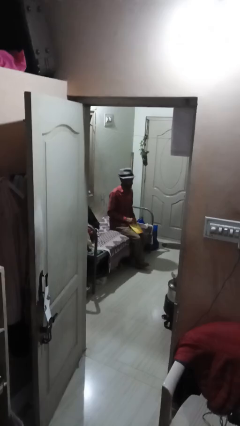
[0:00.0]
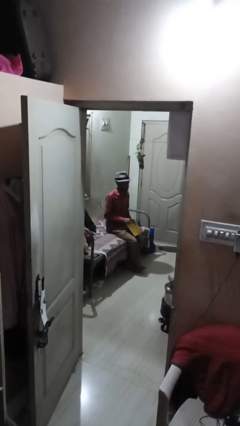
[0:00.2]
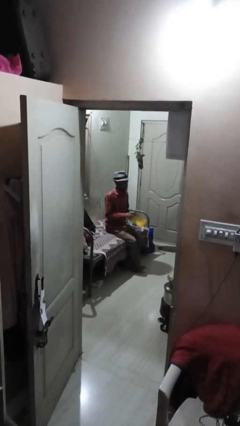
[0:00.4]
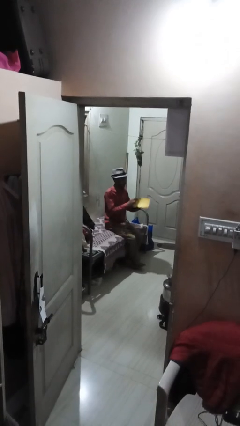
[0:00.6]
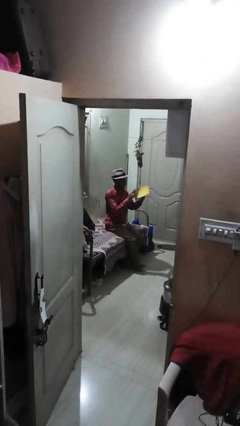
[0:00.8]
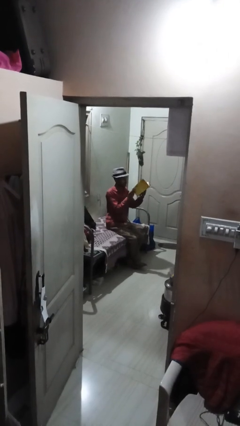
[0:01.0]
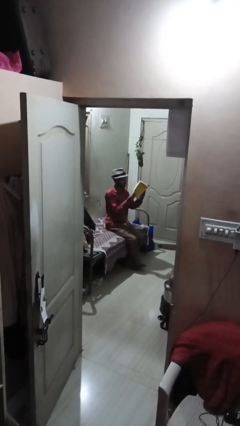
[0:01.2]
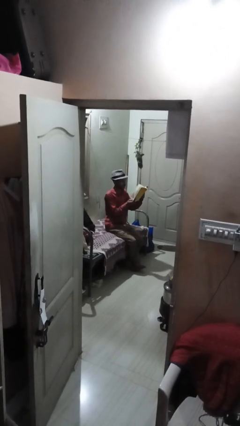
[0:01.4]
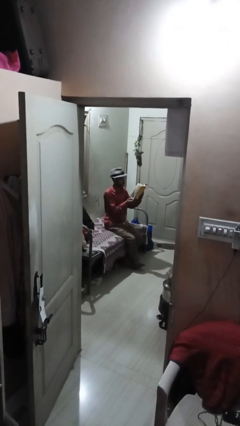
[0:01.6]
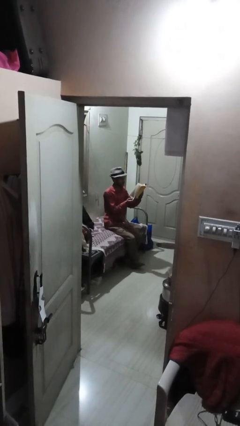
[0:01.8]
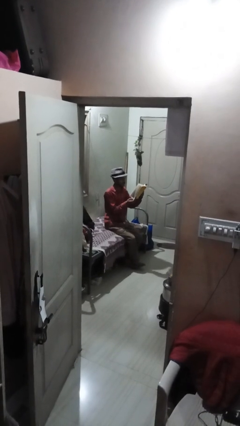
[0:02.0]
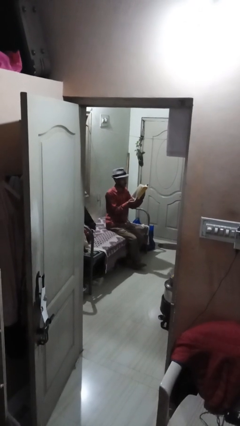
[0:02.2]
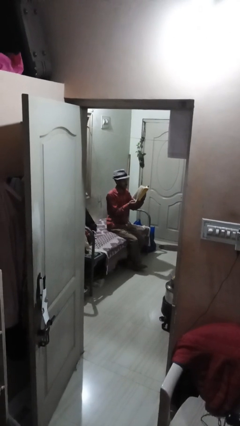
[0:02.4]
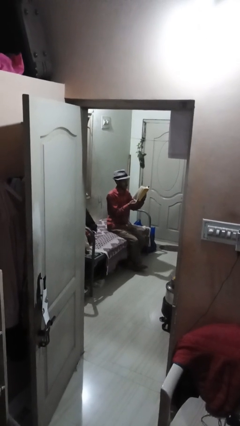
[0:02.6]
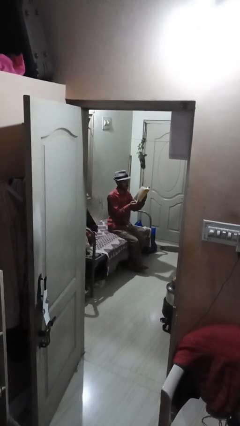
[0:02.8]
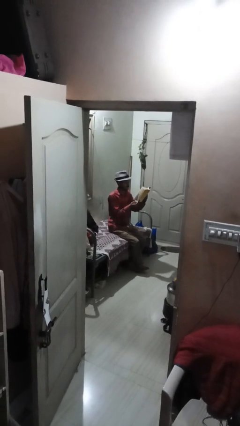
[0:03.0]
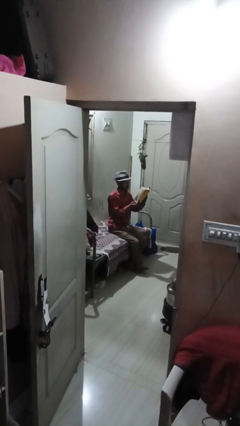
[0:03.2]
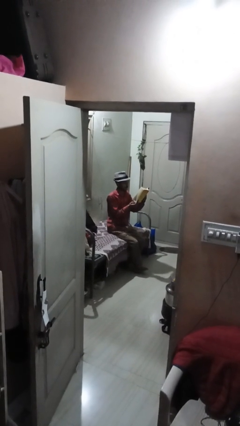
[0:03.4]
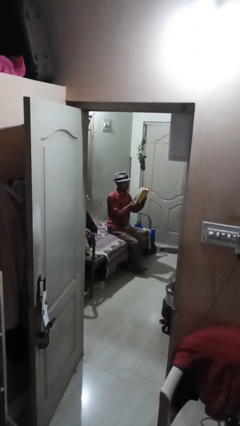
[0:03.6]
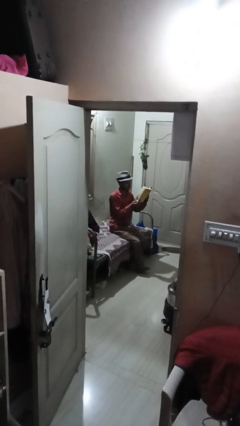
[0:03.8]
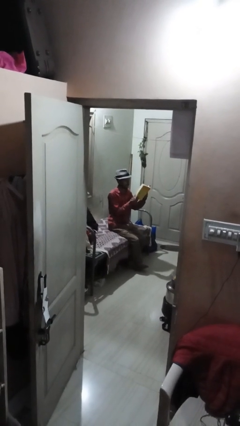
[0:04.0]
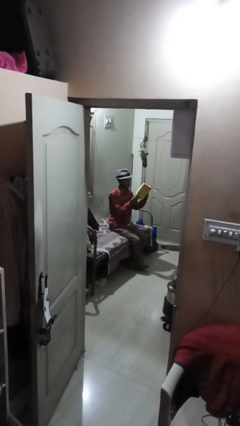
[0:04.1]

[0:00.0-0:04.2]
person reads book

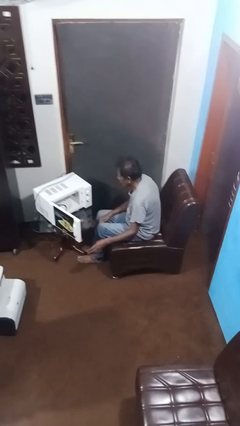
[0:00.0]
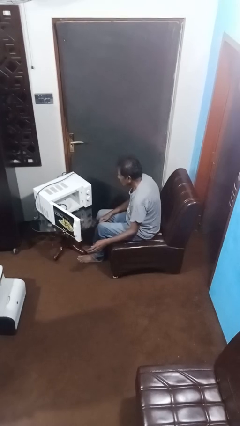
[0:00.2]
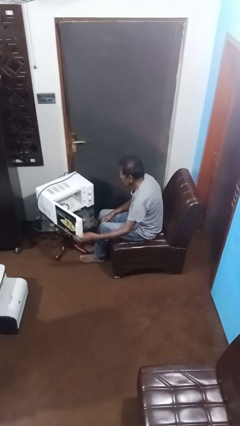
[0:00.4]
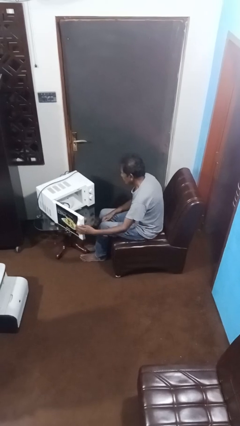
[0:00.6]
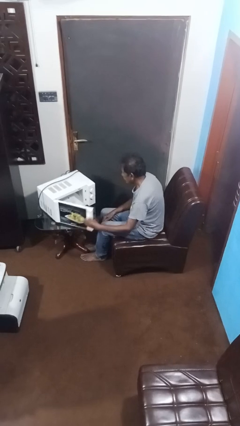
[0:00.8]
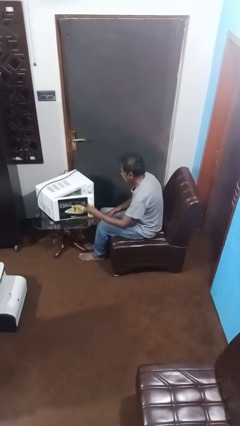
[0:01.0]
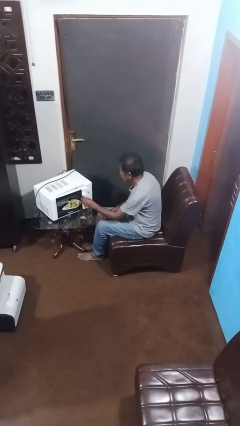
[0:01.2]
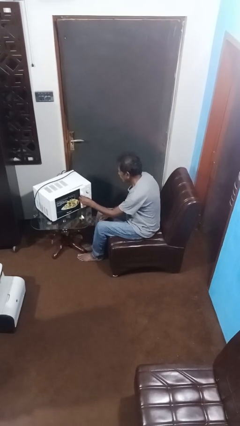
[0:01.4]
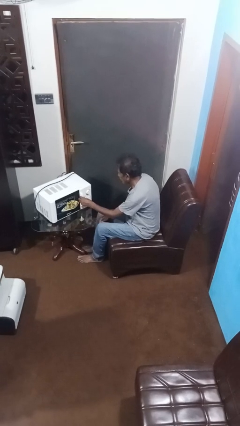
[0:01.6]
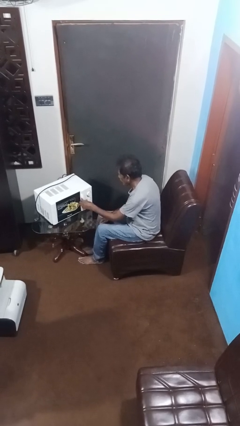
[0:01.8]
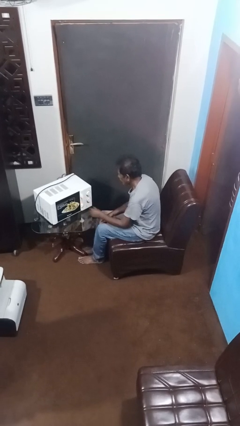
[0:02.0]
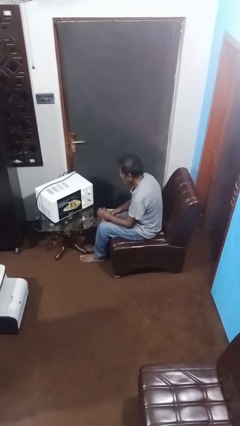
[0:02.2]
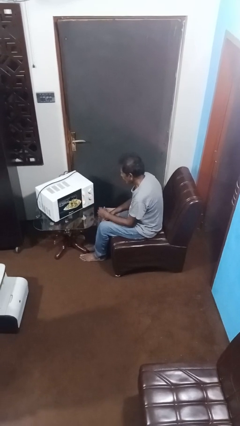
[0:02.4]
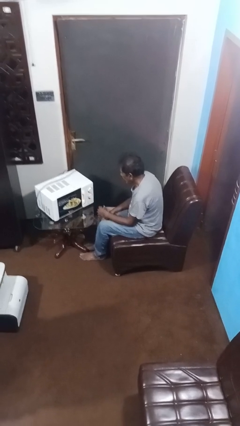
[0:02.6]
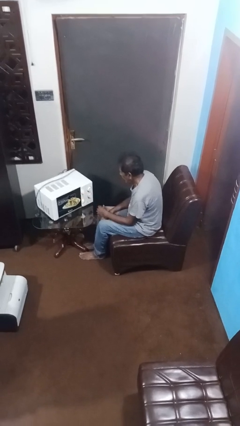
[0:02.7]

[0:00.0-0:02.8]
person closes microwave

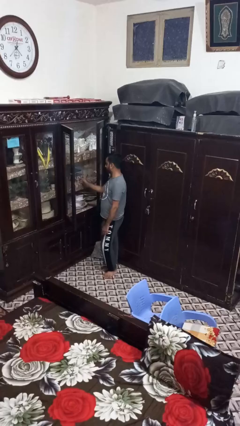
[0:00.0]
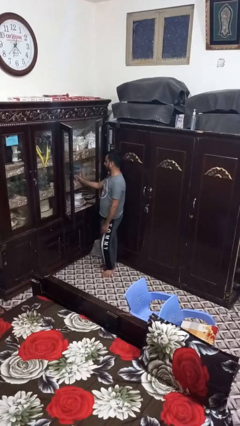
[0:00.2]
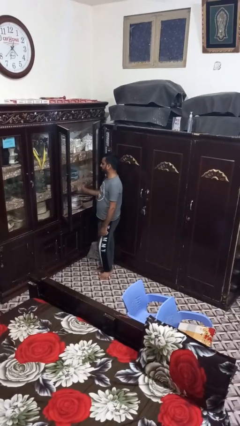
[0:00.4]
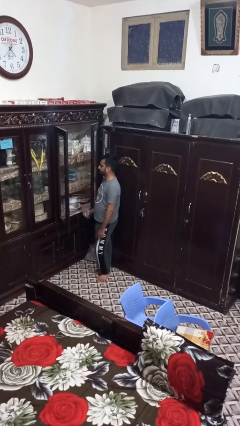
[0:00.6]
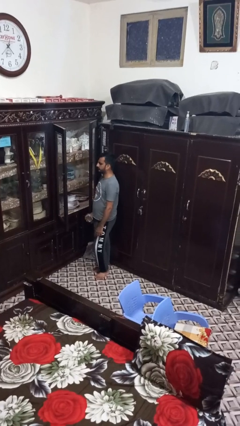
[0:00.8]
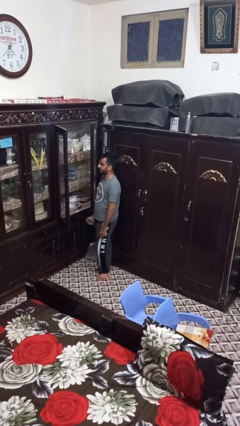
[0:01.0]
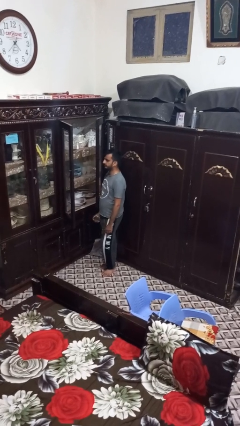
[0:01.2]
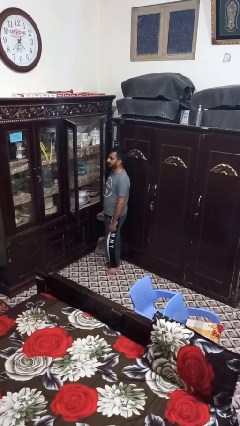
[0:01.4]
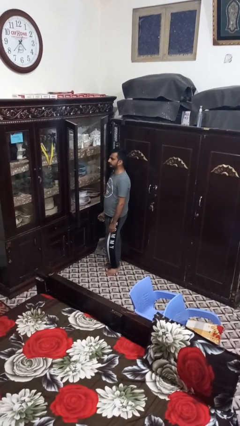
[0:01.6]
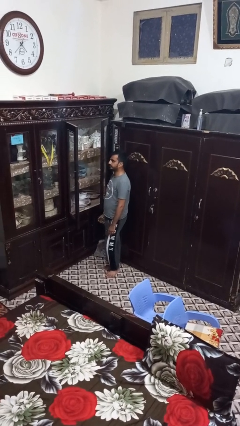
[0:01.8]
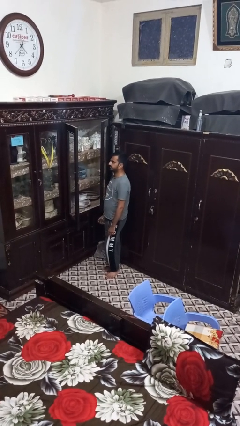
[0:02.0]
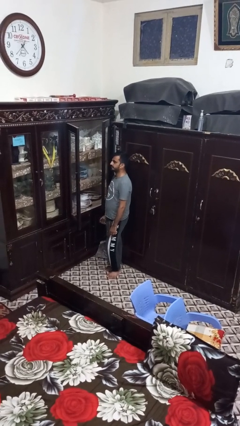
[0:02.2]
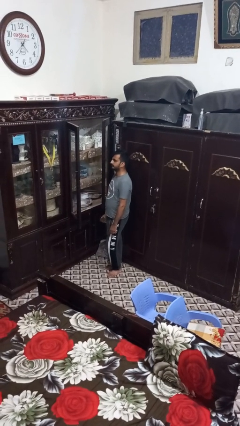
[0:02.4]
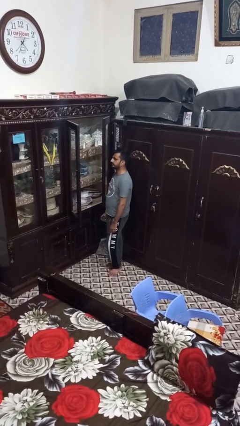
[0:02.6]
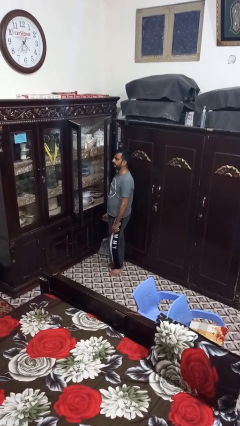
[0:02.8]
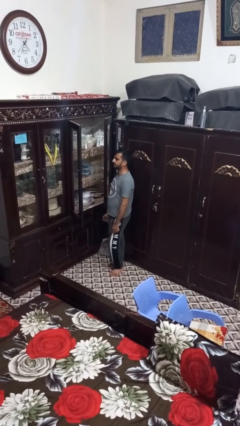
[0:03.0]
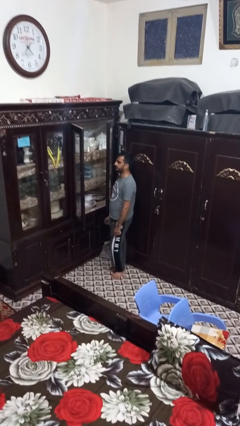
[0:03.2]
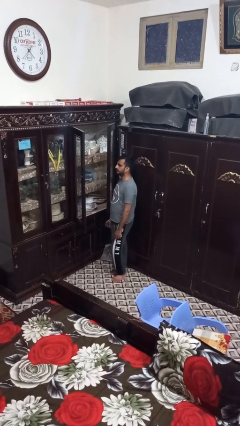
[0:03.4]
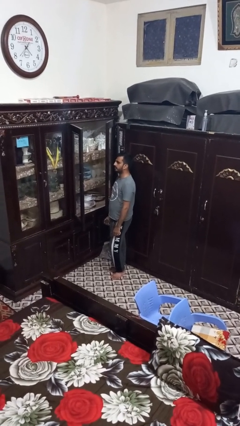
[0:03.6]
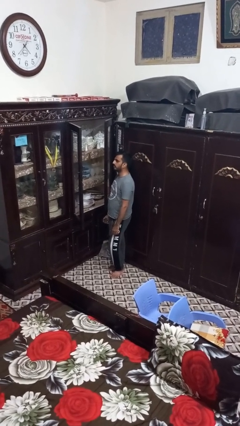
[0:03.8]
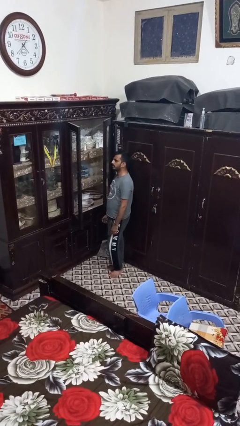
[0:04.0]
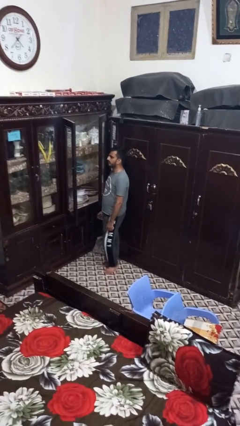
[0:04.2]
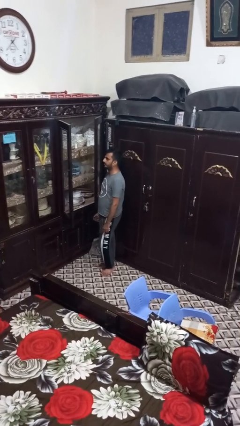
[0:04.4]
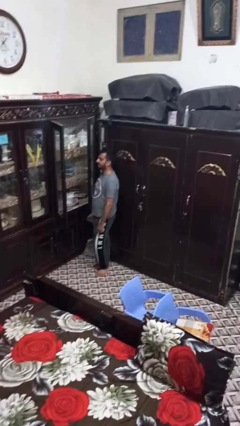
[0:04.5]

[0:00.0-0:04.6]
person picks up object from countertop

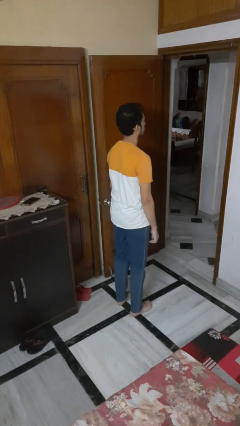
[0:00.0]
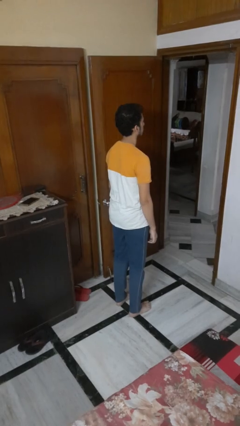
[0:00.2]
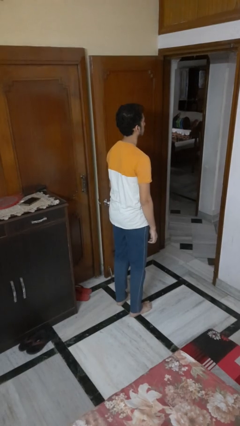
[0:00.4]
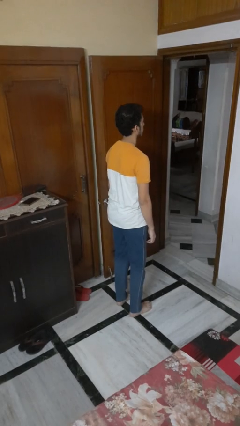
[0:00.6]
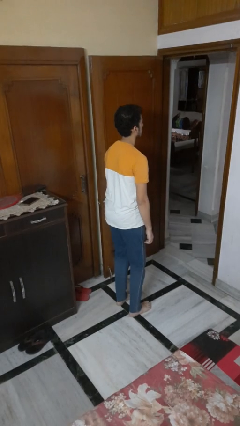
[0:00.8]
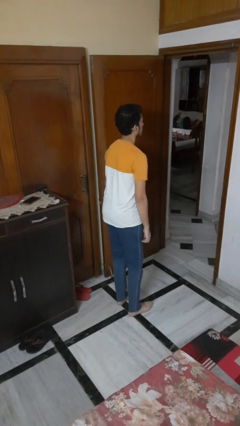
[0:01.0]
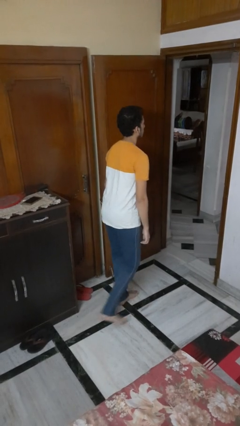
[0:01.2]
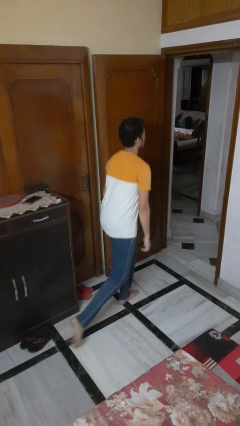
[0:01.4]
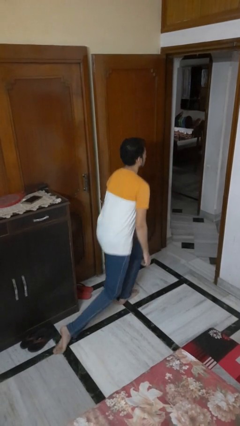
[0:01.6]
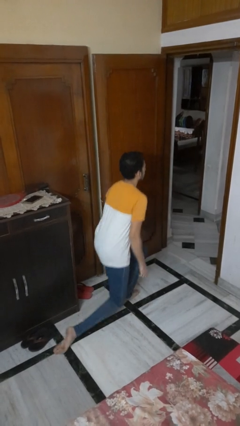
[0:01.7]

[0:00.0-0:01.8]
person stands up from floor

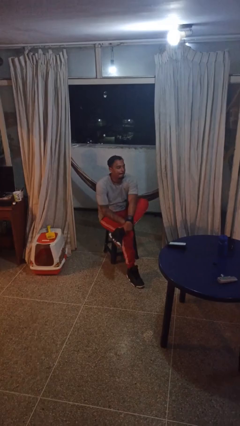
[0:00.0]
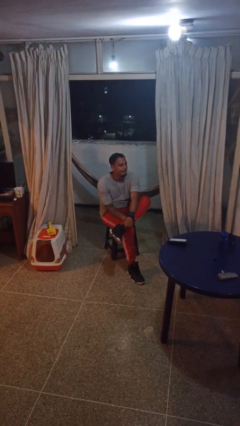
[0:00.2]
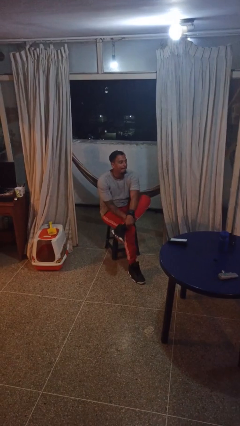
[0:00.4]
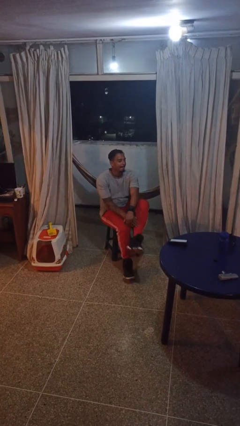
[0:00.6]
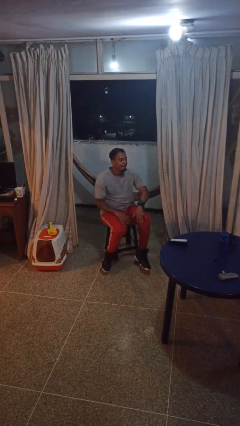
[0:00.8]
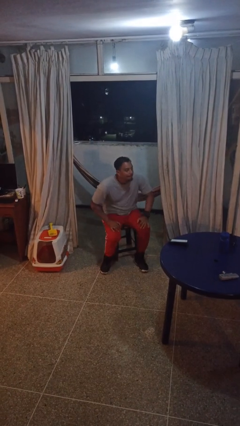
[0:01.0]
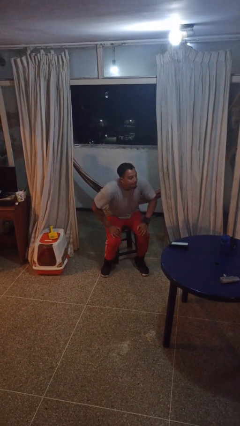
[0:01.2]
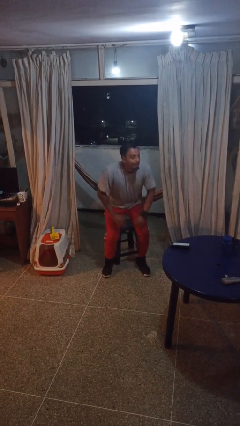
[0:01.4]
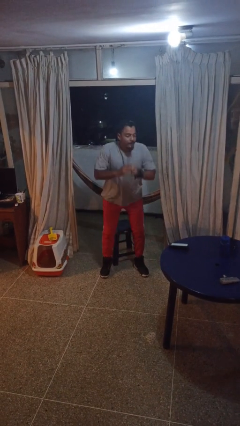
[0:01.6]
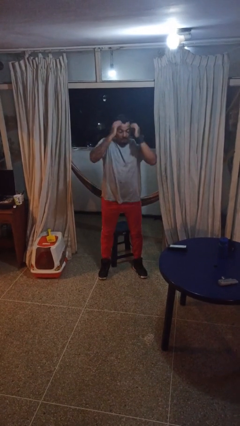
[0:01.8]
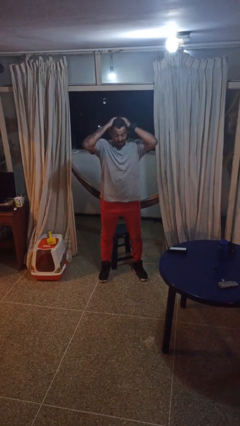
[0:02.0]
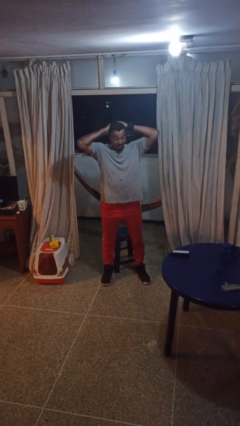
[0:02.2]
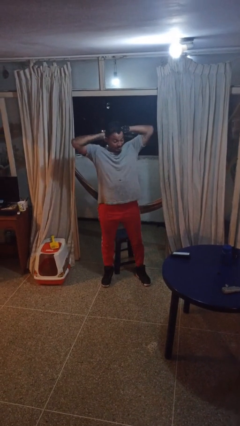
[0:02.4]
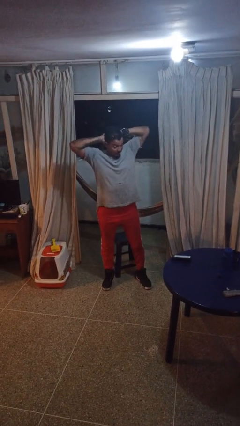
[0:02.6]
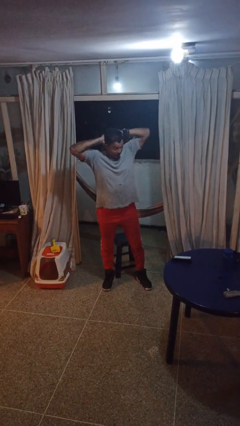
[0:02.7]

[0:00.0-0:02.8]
person stands up

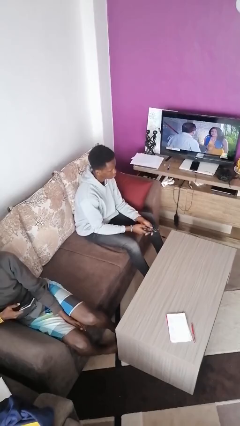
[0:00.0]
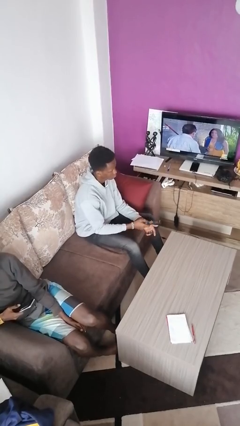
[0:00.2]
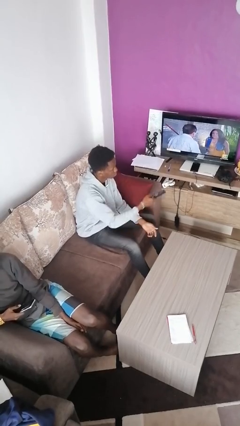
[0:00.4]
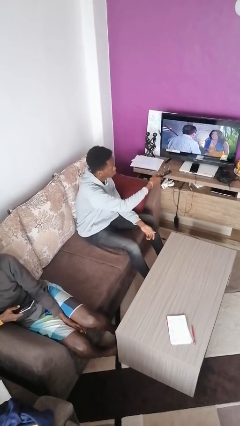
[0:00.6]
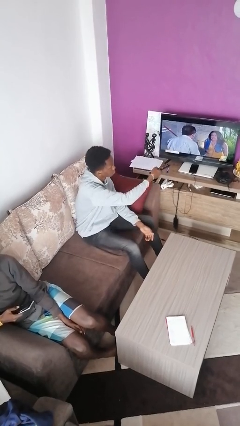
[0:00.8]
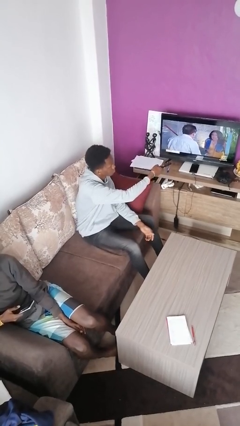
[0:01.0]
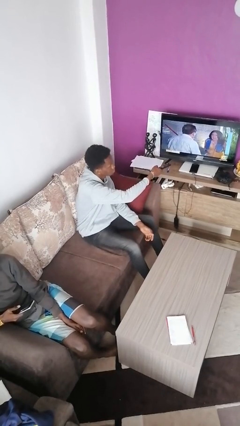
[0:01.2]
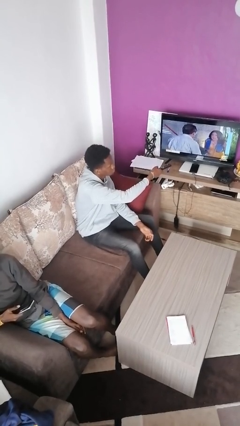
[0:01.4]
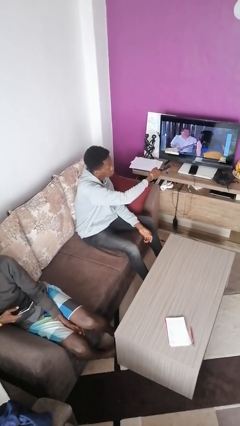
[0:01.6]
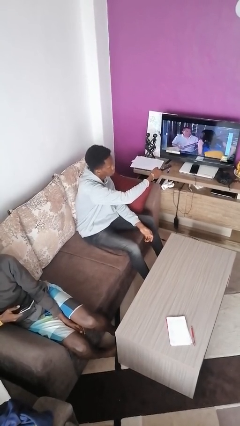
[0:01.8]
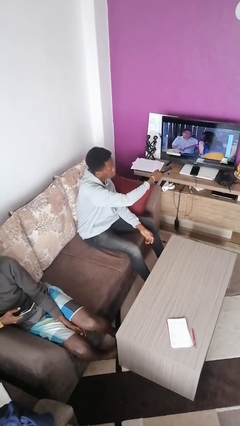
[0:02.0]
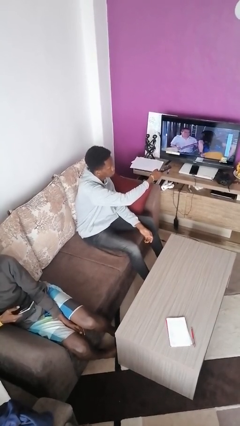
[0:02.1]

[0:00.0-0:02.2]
person uses television remote
